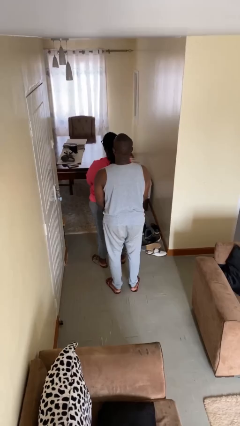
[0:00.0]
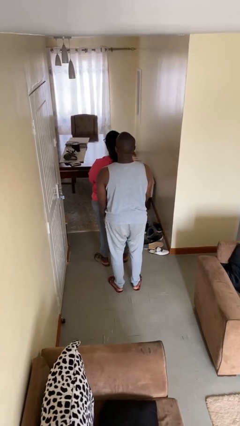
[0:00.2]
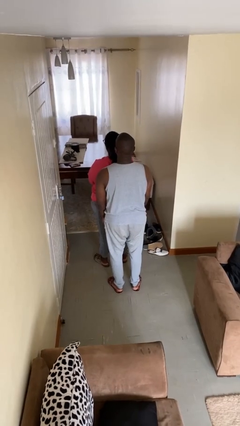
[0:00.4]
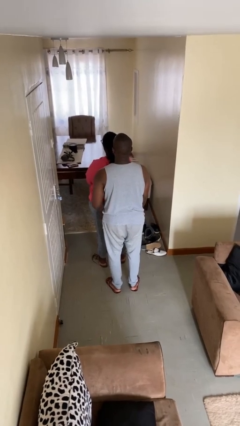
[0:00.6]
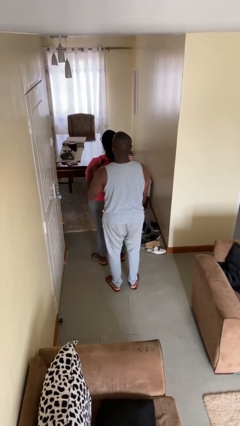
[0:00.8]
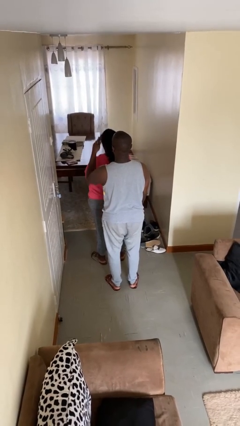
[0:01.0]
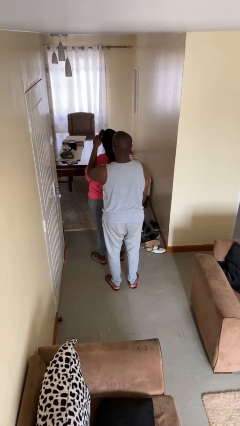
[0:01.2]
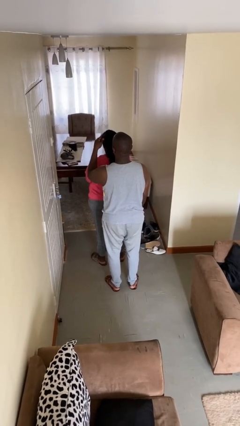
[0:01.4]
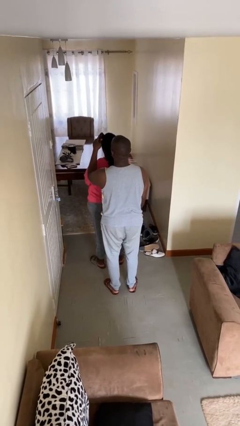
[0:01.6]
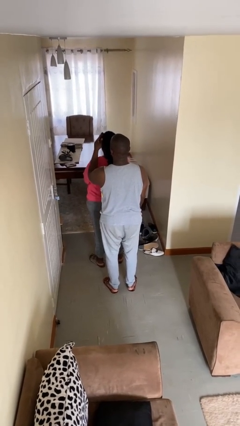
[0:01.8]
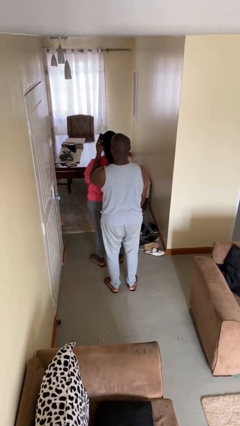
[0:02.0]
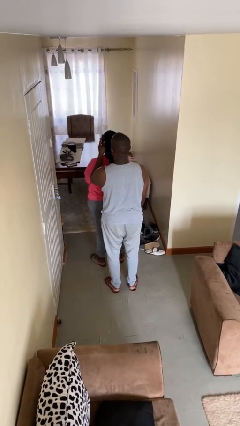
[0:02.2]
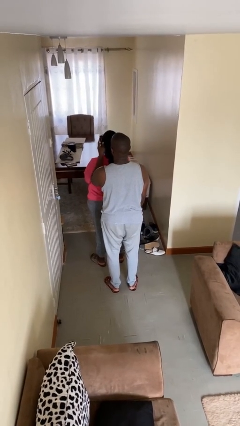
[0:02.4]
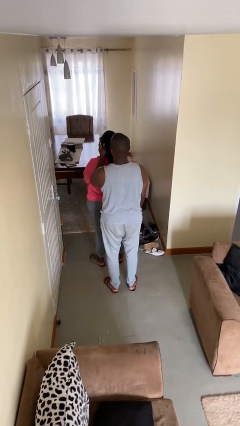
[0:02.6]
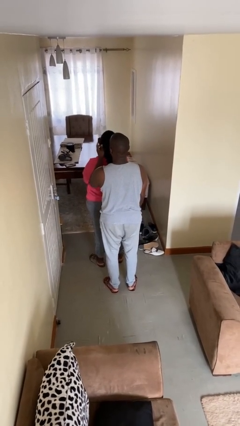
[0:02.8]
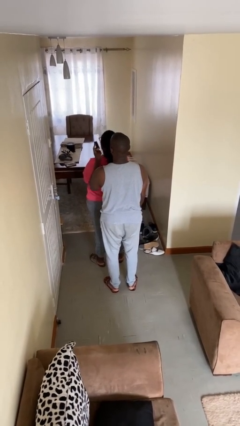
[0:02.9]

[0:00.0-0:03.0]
person brushes hair of person

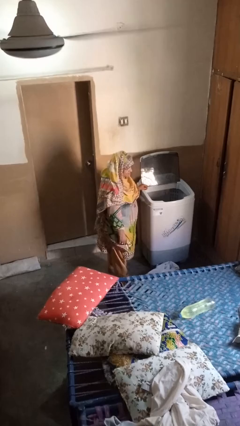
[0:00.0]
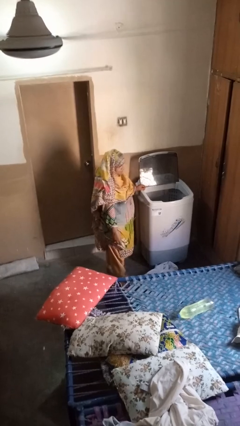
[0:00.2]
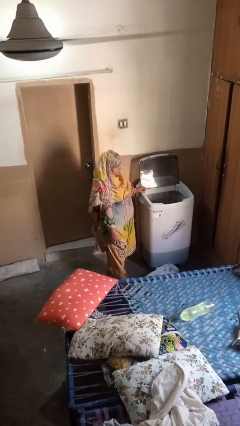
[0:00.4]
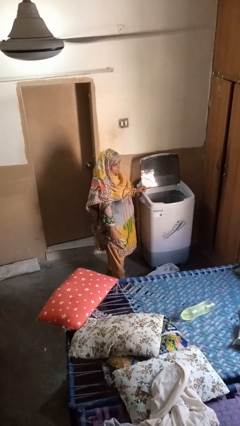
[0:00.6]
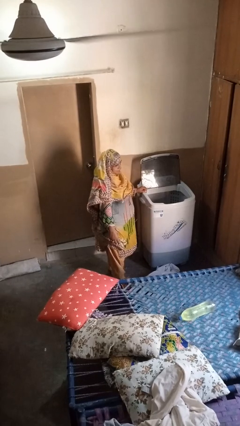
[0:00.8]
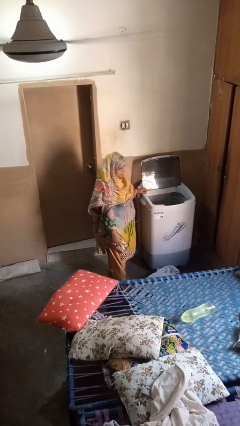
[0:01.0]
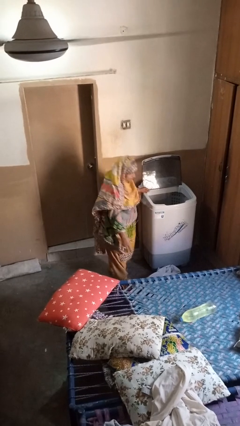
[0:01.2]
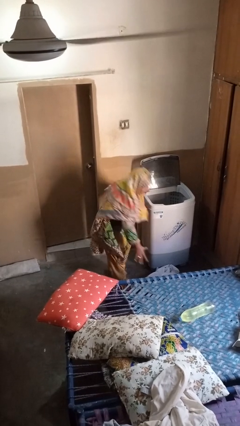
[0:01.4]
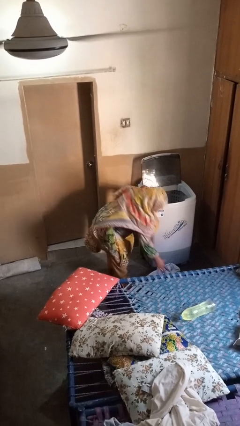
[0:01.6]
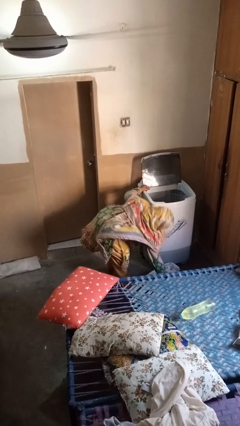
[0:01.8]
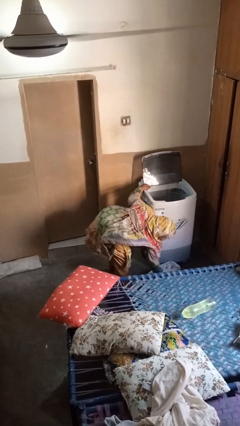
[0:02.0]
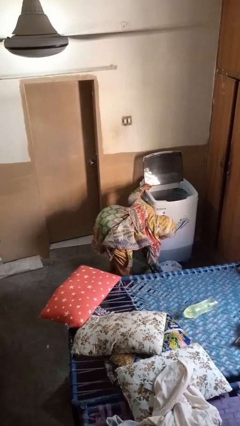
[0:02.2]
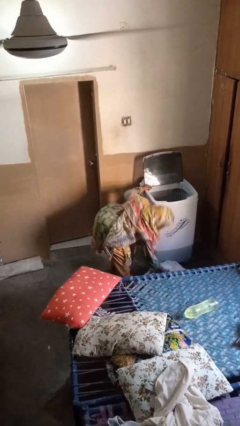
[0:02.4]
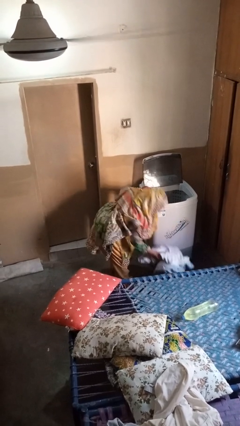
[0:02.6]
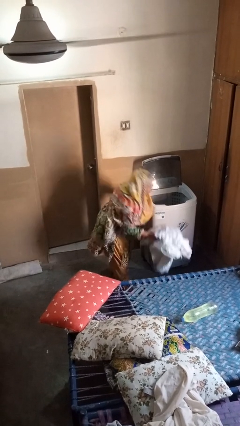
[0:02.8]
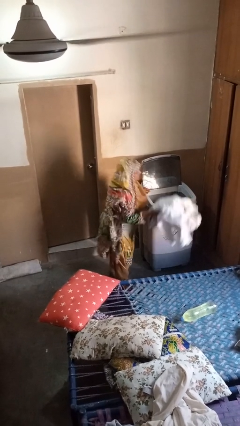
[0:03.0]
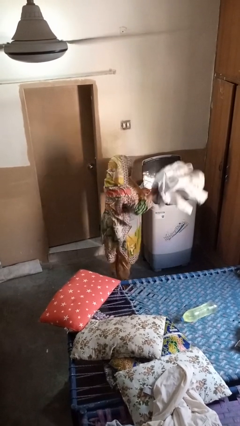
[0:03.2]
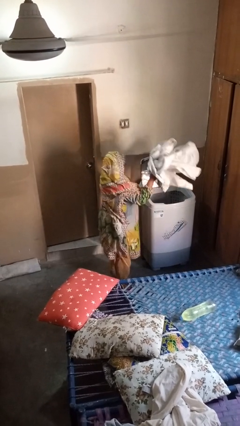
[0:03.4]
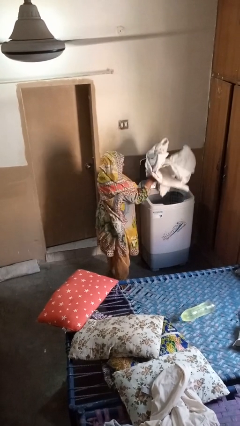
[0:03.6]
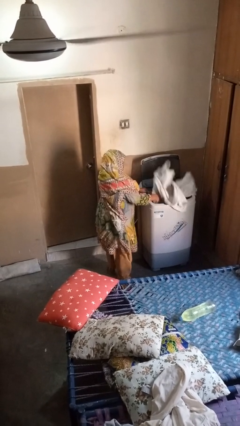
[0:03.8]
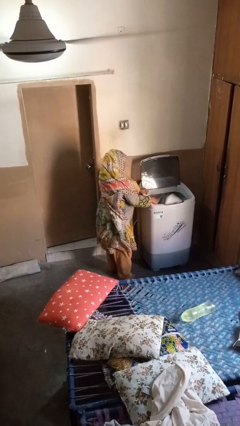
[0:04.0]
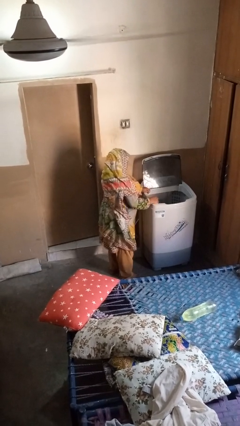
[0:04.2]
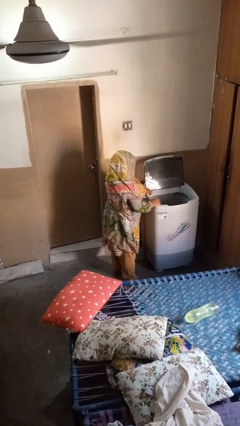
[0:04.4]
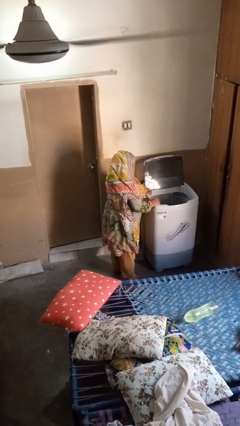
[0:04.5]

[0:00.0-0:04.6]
person loads clotheswasher

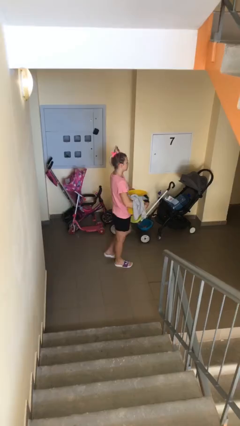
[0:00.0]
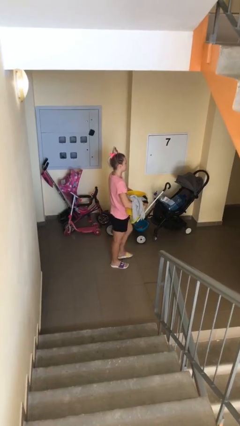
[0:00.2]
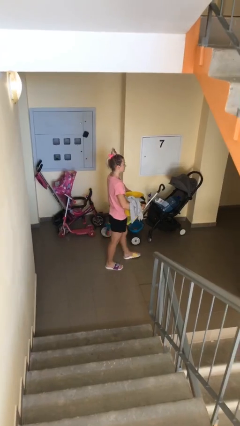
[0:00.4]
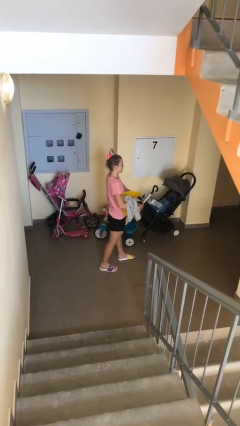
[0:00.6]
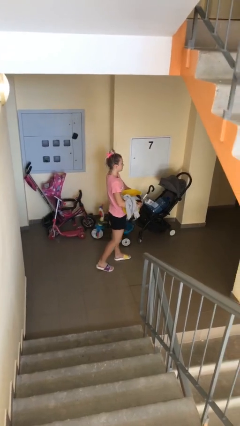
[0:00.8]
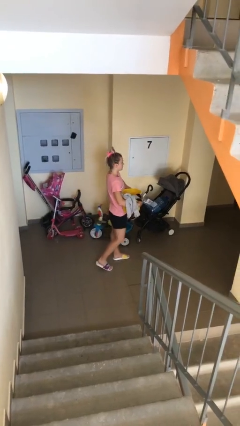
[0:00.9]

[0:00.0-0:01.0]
person carries laundry basket

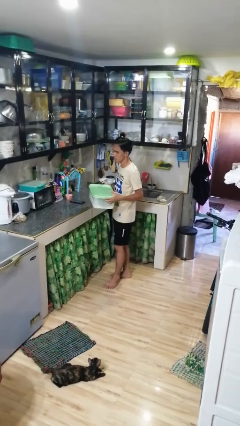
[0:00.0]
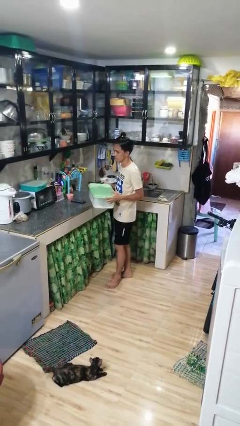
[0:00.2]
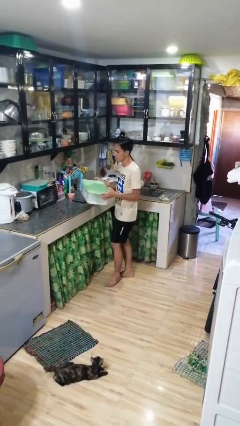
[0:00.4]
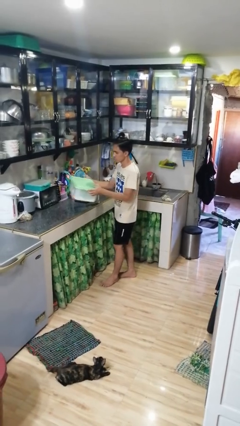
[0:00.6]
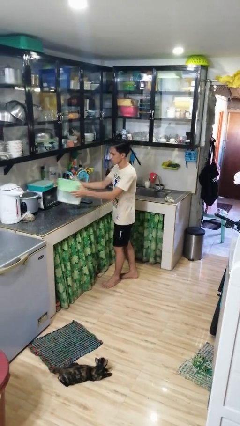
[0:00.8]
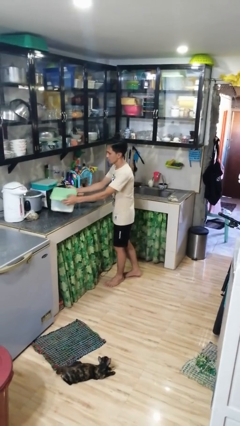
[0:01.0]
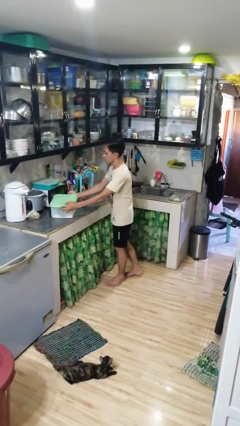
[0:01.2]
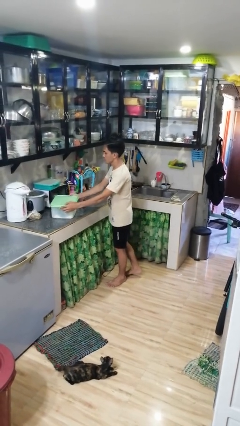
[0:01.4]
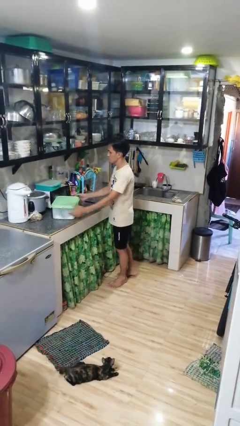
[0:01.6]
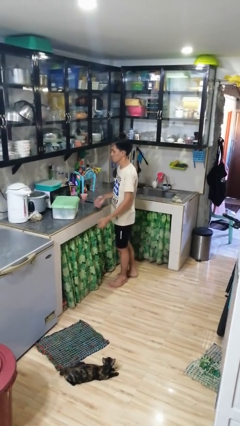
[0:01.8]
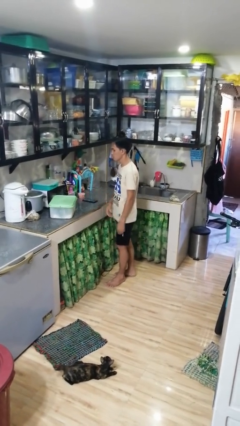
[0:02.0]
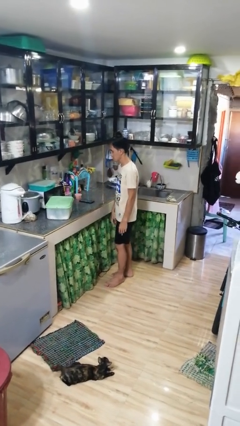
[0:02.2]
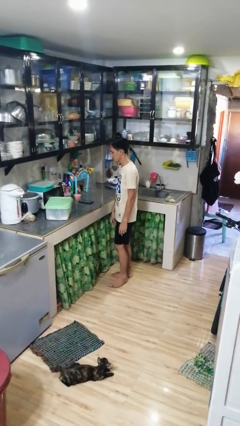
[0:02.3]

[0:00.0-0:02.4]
person puts down object on countertop

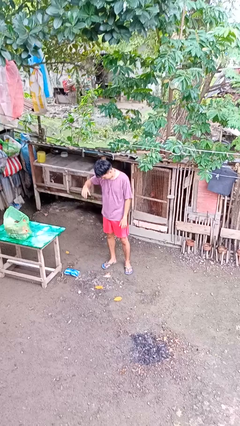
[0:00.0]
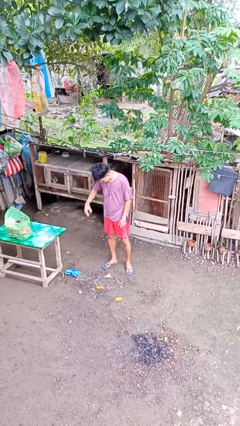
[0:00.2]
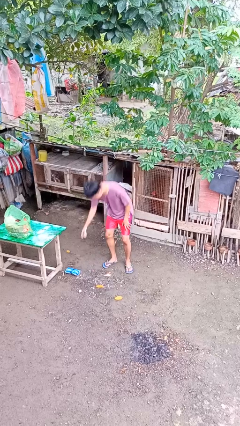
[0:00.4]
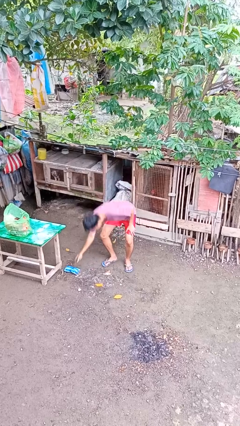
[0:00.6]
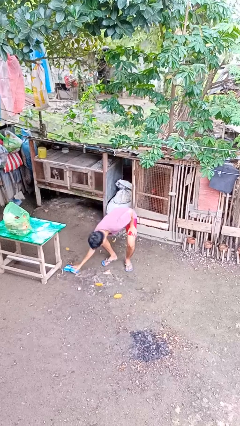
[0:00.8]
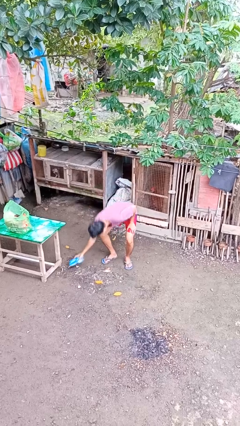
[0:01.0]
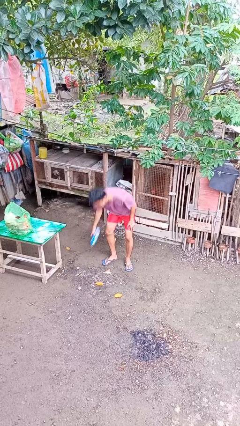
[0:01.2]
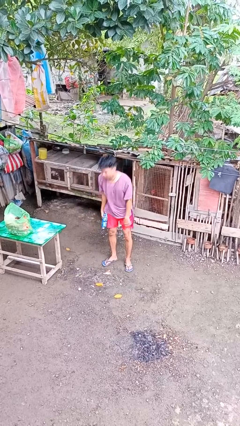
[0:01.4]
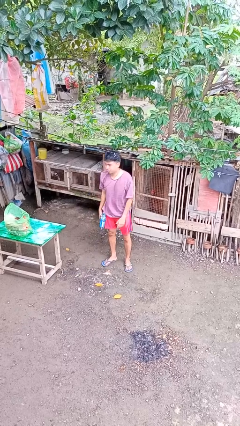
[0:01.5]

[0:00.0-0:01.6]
person picks up object from floor

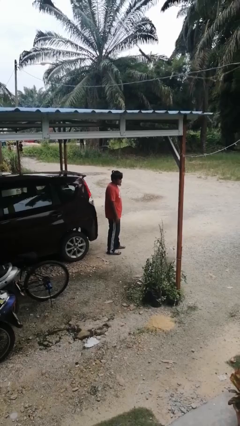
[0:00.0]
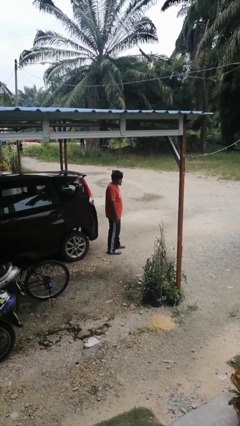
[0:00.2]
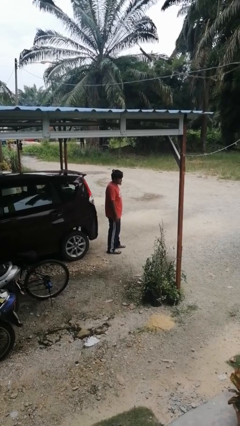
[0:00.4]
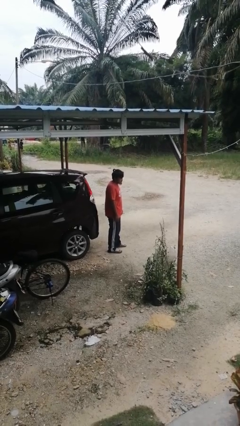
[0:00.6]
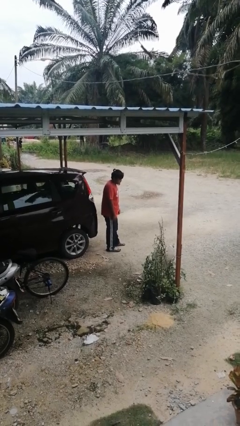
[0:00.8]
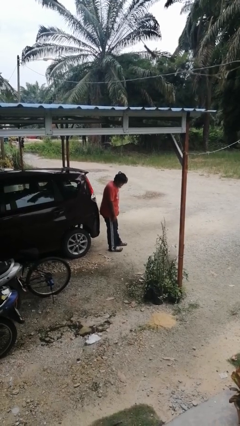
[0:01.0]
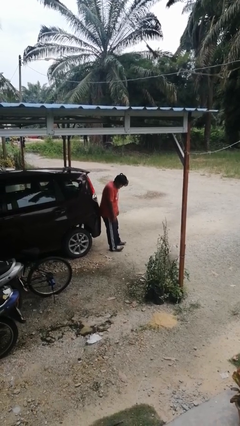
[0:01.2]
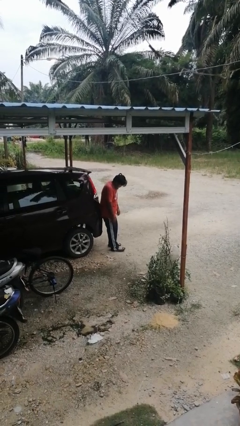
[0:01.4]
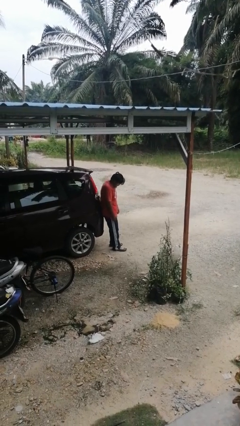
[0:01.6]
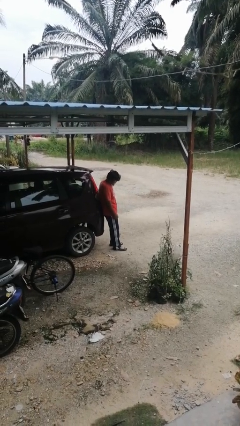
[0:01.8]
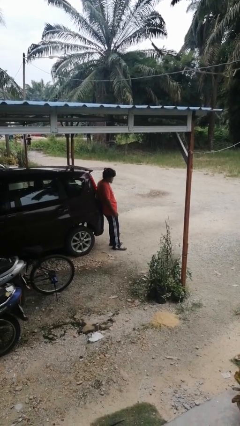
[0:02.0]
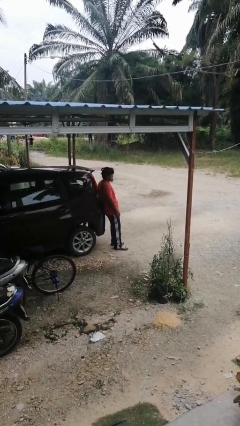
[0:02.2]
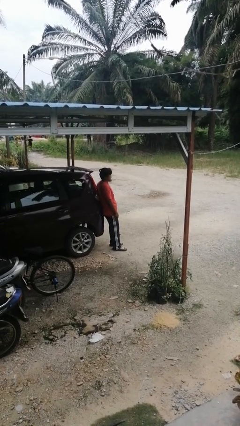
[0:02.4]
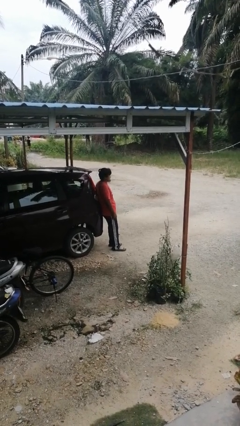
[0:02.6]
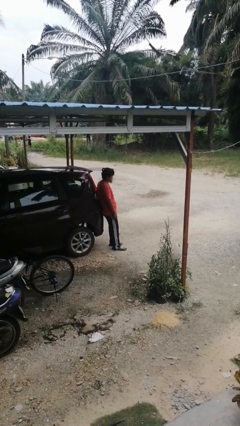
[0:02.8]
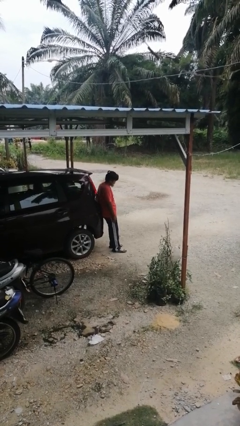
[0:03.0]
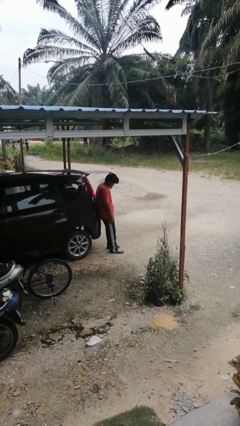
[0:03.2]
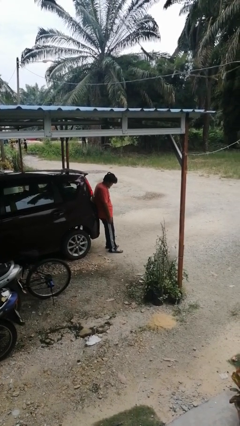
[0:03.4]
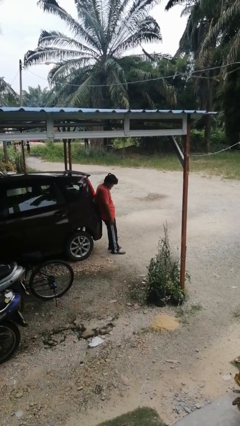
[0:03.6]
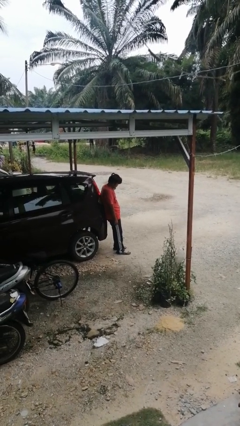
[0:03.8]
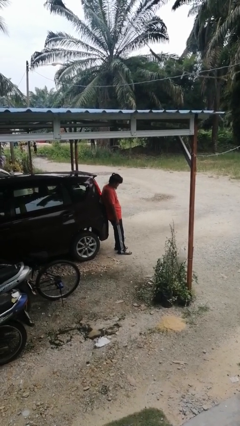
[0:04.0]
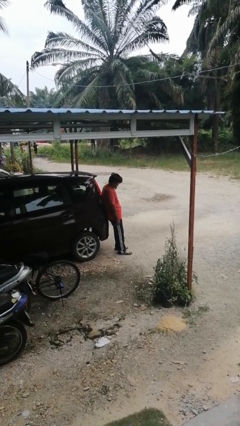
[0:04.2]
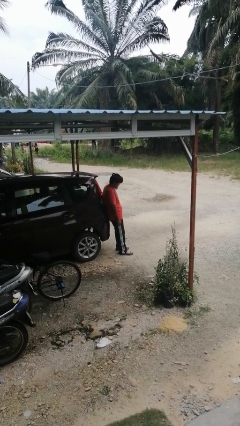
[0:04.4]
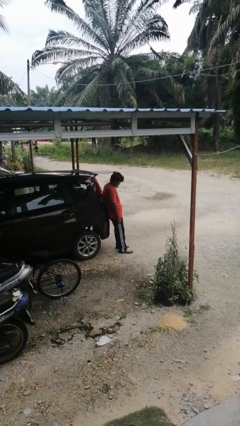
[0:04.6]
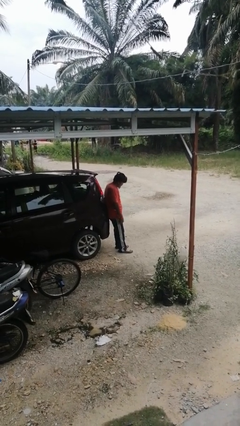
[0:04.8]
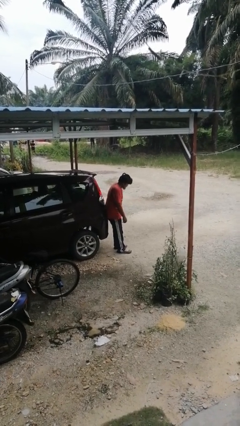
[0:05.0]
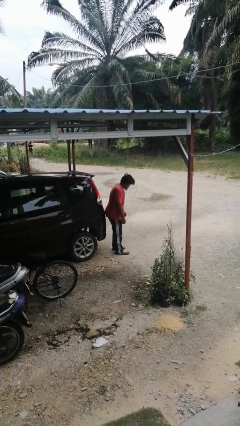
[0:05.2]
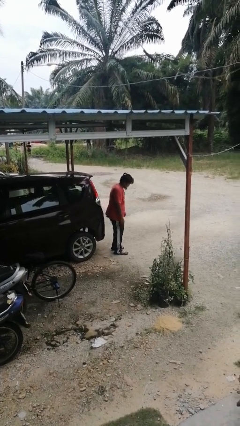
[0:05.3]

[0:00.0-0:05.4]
person leans against car
